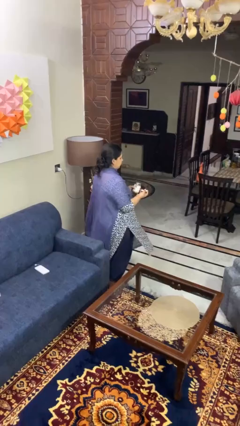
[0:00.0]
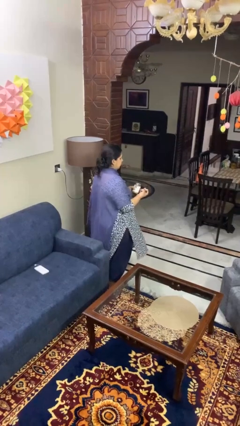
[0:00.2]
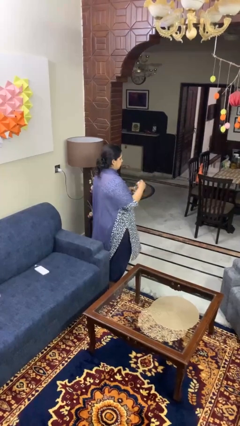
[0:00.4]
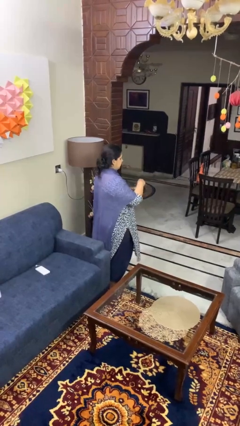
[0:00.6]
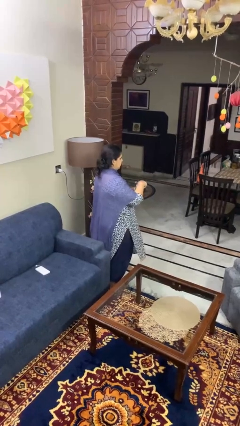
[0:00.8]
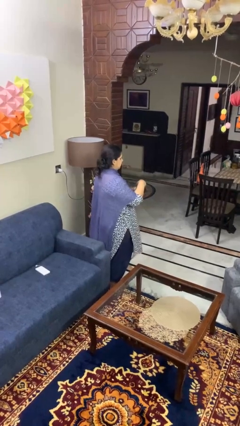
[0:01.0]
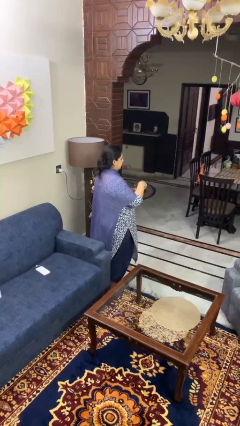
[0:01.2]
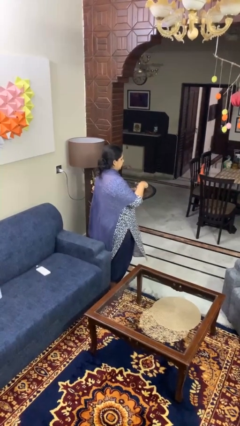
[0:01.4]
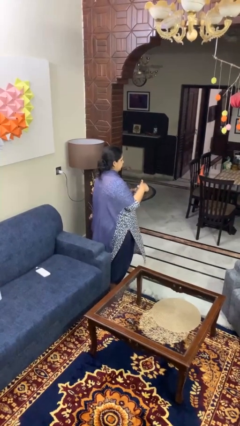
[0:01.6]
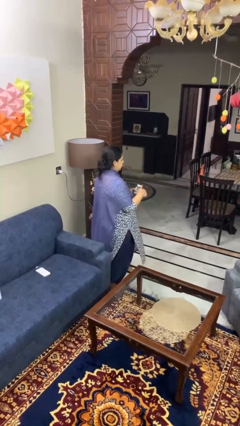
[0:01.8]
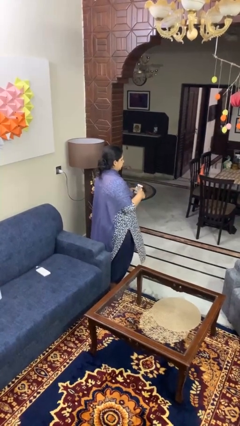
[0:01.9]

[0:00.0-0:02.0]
person closes jar

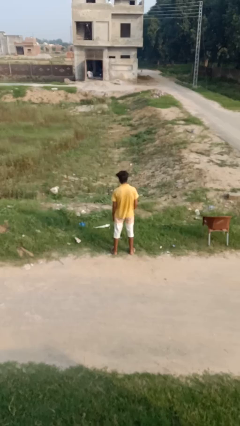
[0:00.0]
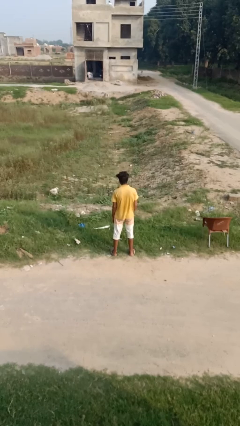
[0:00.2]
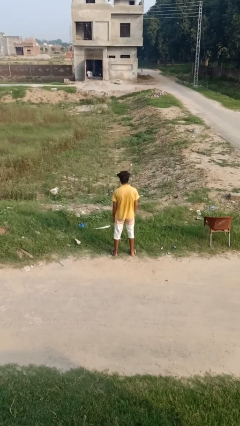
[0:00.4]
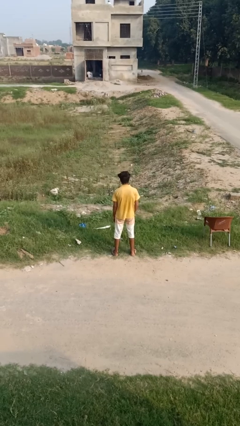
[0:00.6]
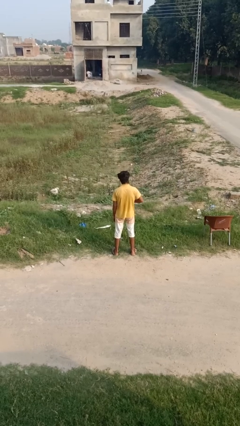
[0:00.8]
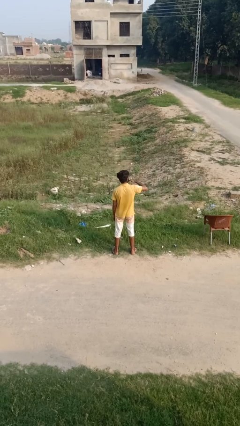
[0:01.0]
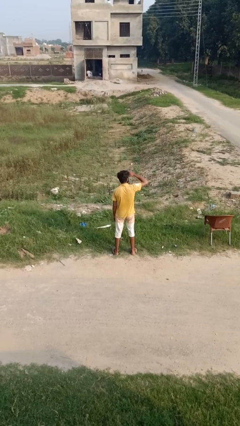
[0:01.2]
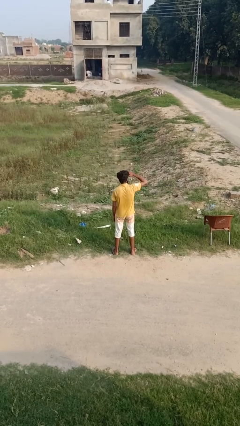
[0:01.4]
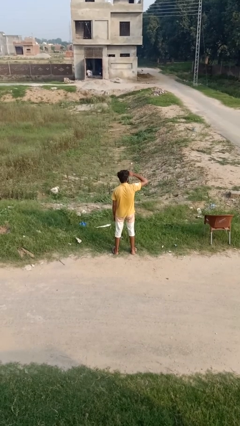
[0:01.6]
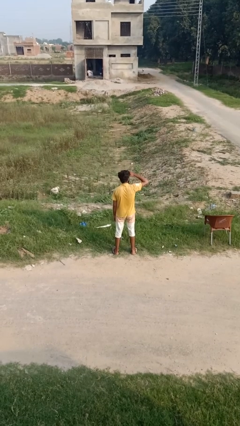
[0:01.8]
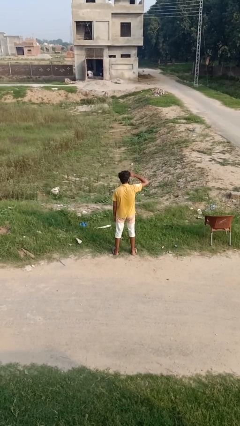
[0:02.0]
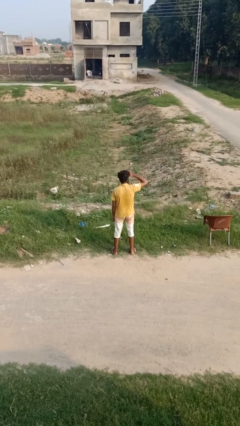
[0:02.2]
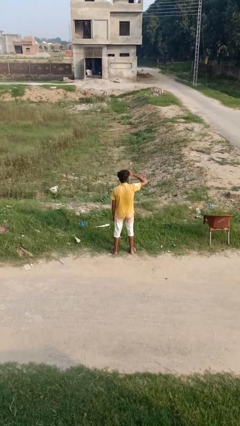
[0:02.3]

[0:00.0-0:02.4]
person shades eyes

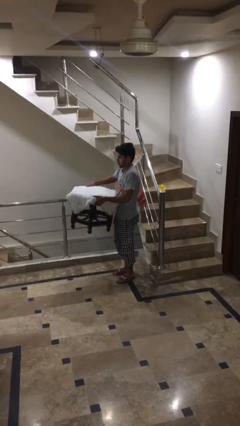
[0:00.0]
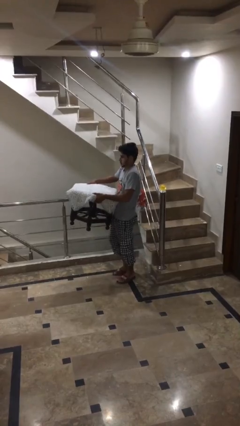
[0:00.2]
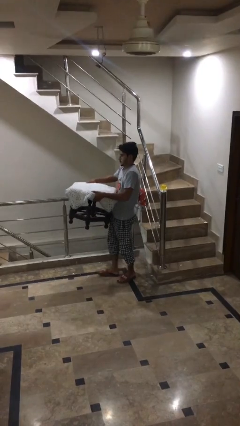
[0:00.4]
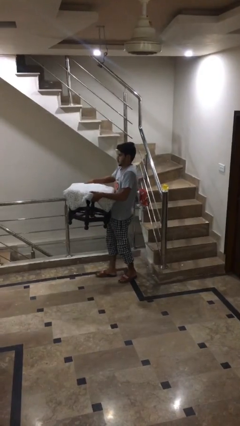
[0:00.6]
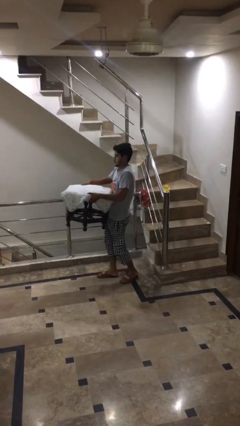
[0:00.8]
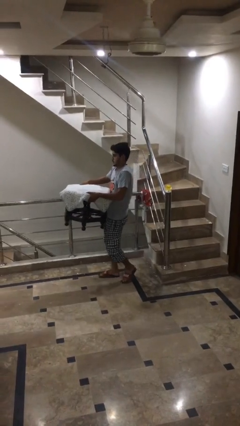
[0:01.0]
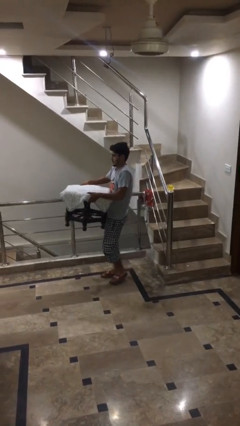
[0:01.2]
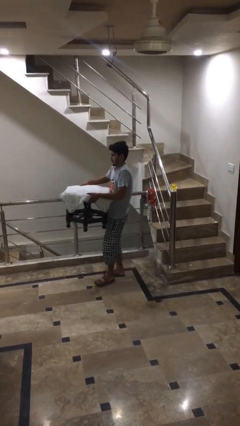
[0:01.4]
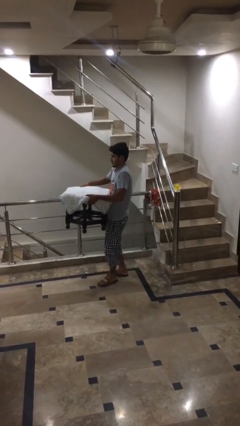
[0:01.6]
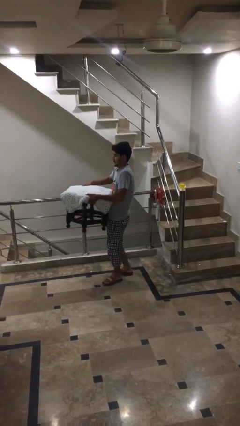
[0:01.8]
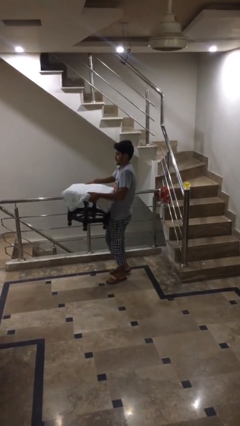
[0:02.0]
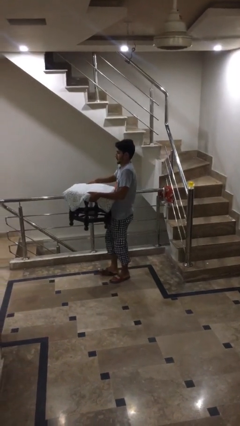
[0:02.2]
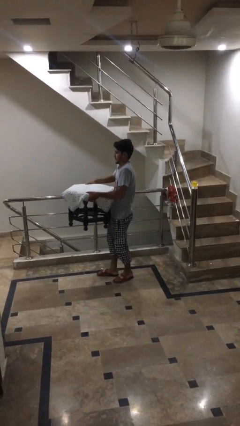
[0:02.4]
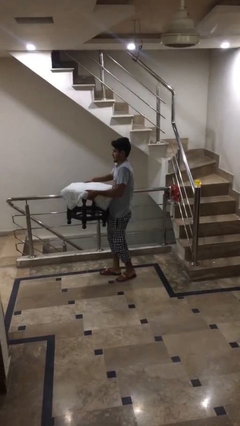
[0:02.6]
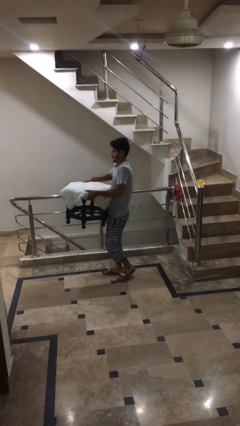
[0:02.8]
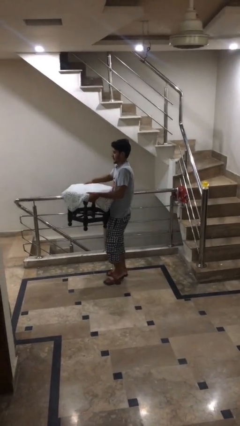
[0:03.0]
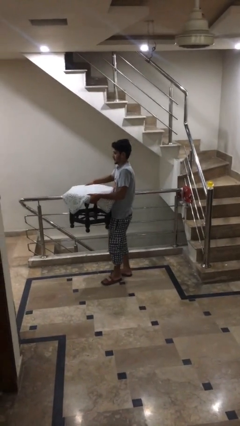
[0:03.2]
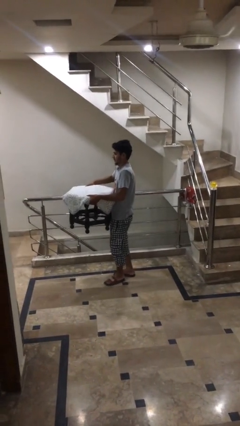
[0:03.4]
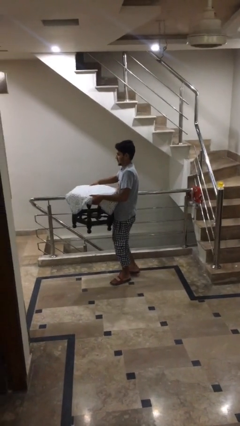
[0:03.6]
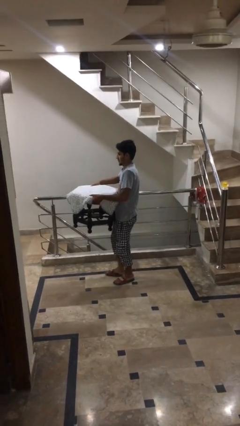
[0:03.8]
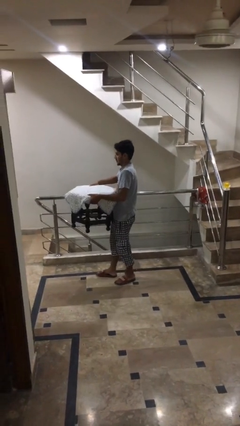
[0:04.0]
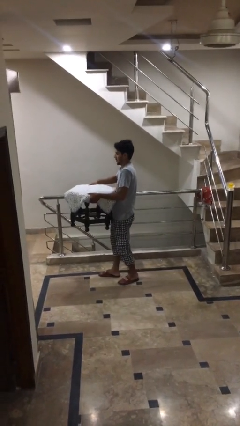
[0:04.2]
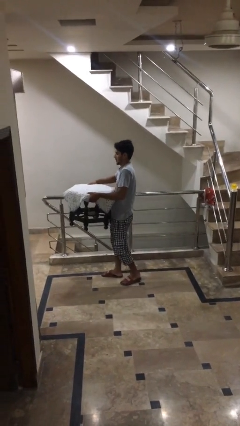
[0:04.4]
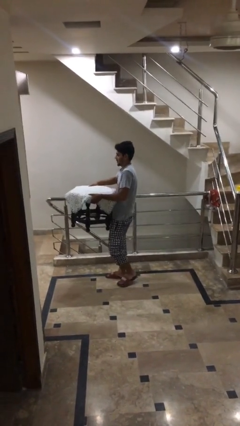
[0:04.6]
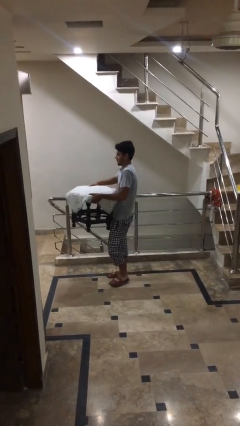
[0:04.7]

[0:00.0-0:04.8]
person carries heavy object

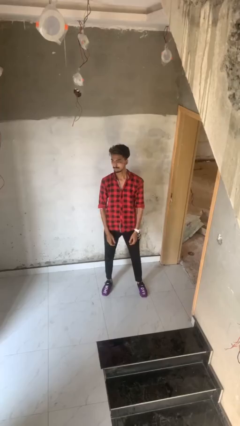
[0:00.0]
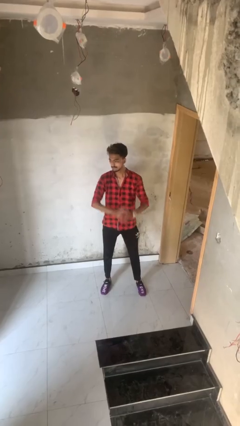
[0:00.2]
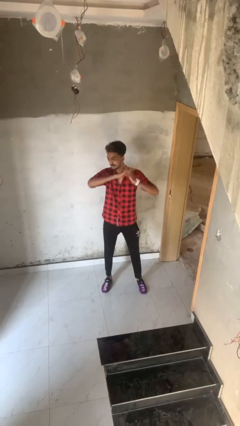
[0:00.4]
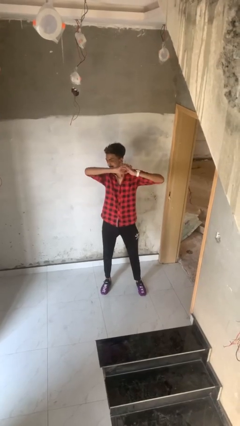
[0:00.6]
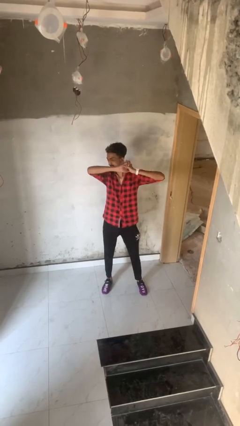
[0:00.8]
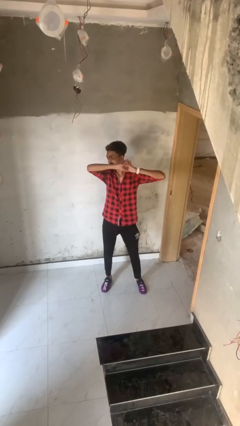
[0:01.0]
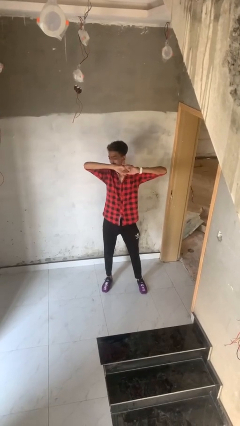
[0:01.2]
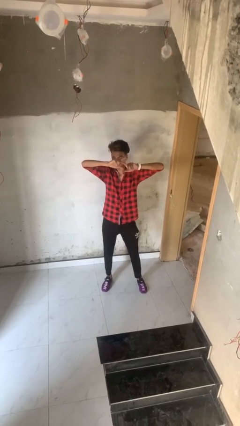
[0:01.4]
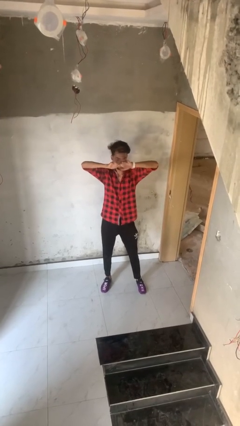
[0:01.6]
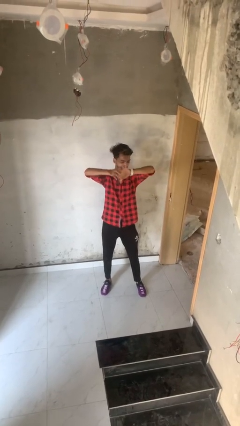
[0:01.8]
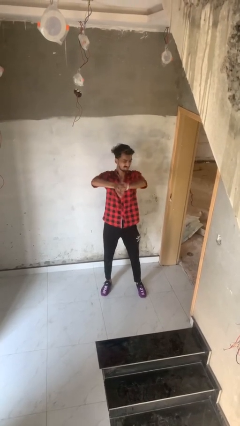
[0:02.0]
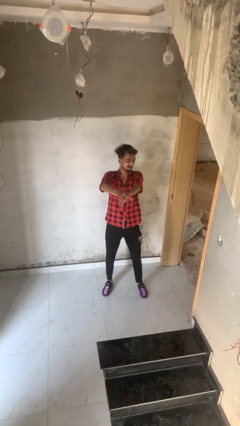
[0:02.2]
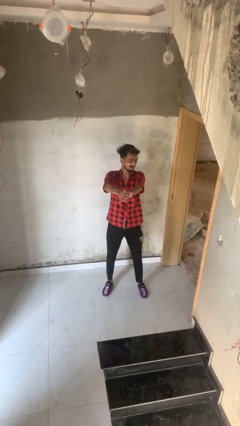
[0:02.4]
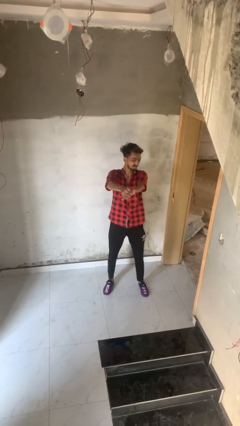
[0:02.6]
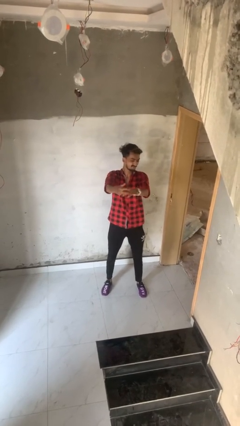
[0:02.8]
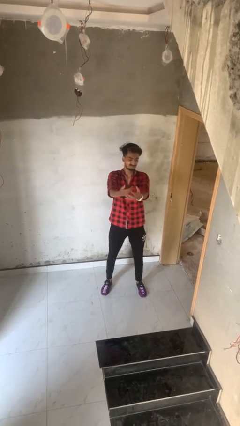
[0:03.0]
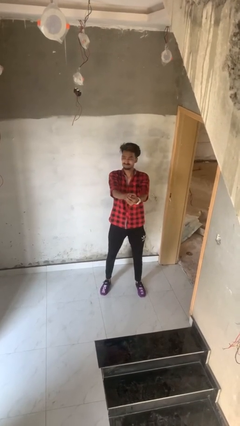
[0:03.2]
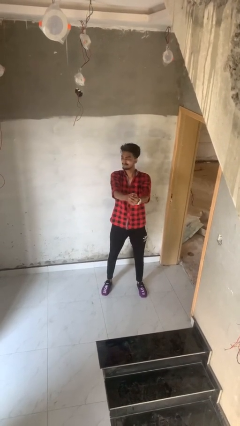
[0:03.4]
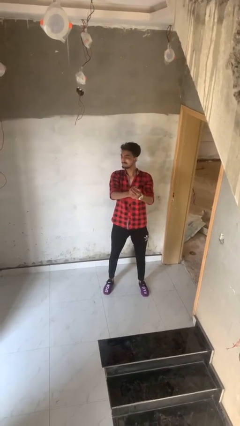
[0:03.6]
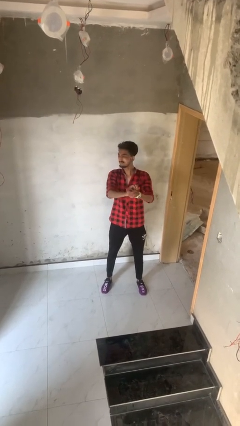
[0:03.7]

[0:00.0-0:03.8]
person cracks knuckles

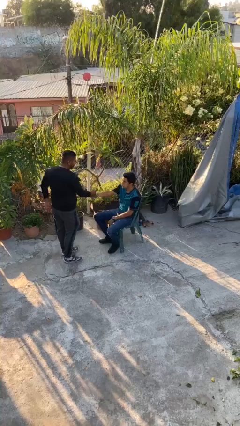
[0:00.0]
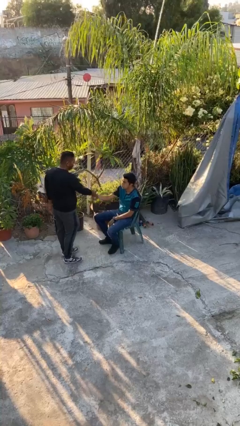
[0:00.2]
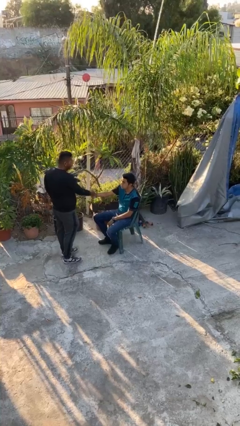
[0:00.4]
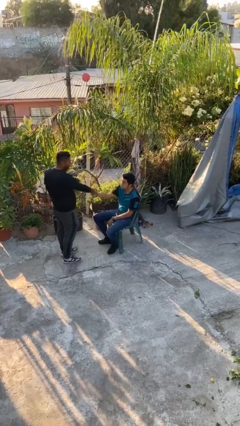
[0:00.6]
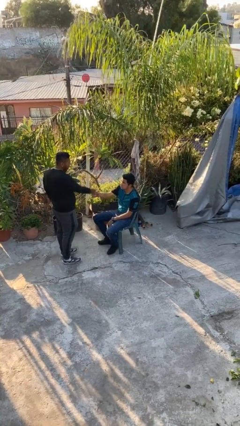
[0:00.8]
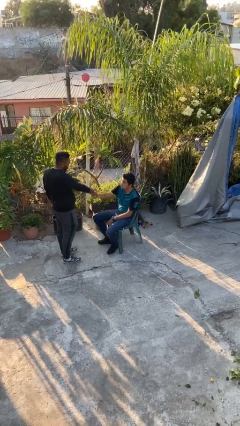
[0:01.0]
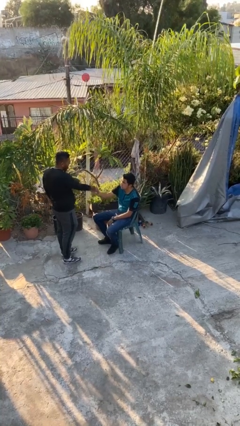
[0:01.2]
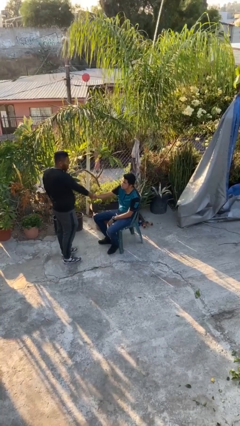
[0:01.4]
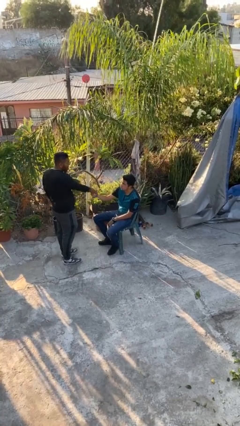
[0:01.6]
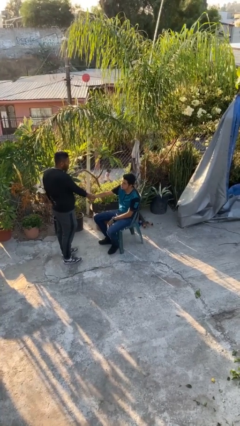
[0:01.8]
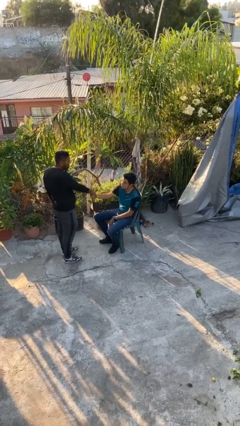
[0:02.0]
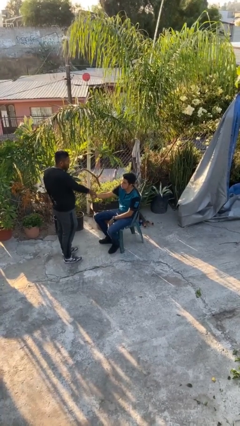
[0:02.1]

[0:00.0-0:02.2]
person shakes hand

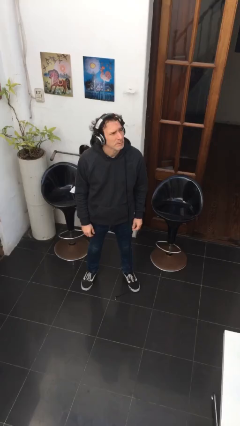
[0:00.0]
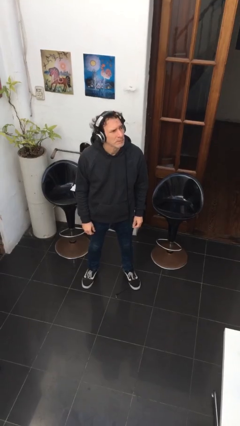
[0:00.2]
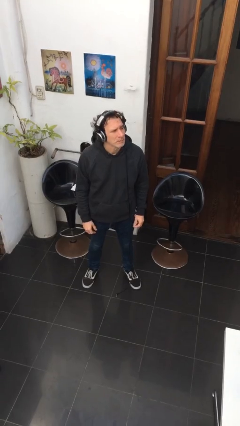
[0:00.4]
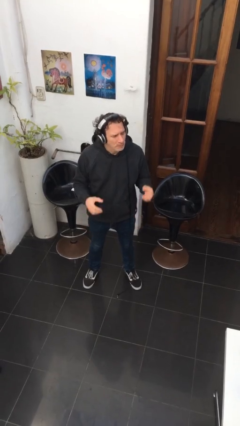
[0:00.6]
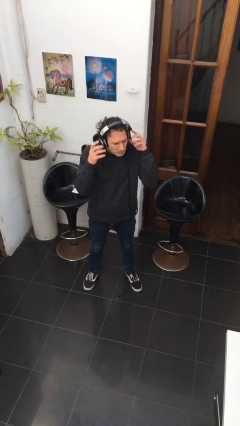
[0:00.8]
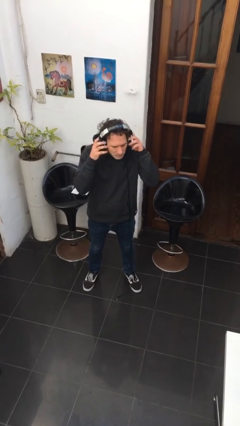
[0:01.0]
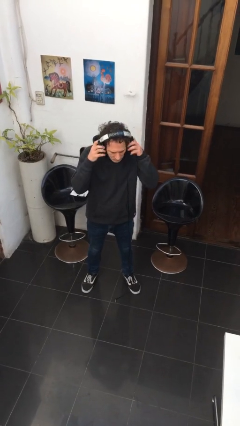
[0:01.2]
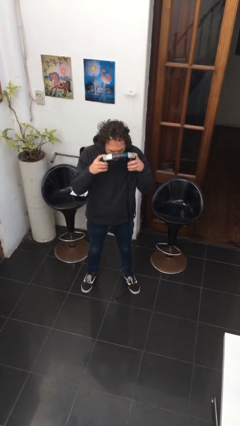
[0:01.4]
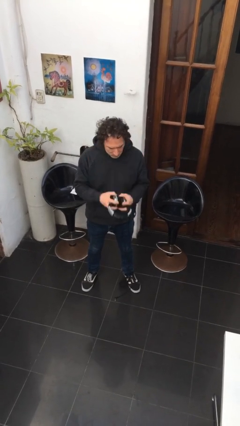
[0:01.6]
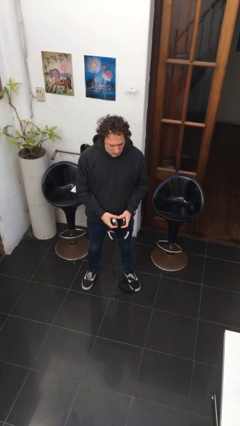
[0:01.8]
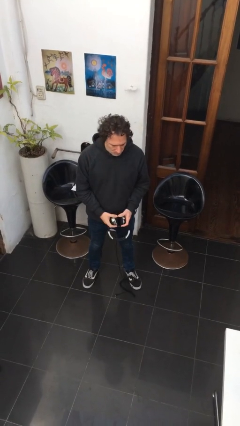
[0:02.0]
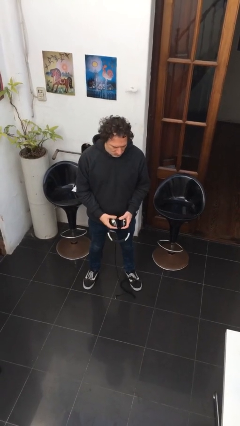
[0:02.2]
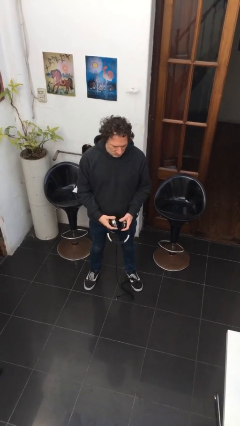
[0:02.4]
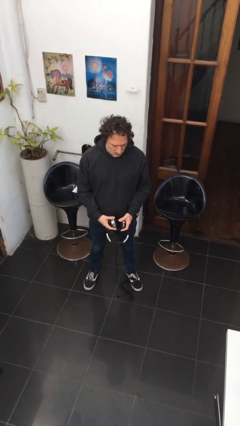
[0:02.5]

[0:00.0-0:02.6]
person takes off headphones
